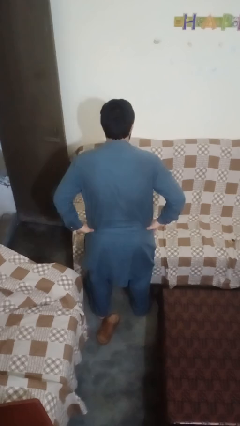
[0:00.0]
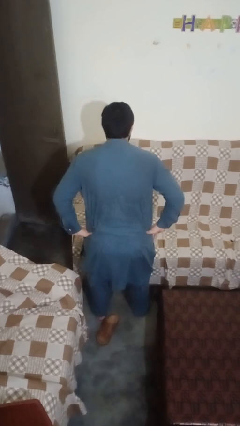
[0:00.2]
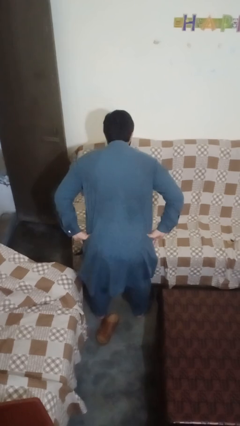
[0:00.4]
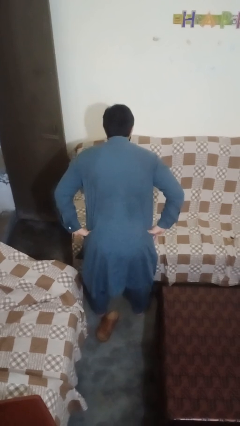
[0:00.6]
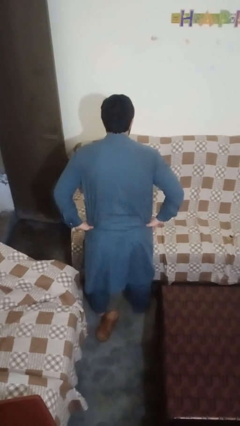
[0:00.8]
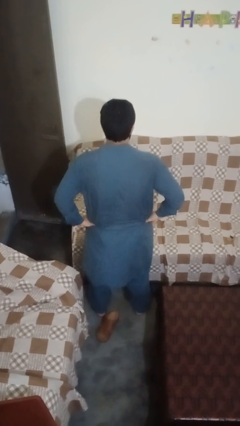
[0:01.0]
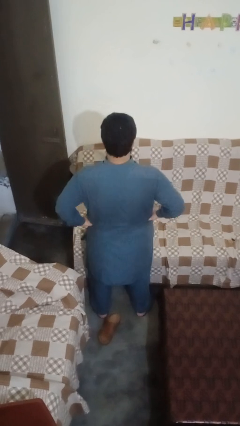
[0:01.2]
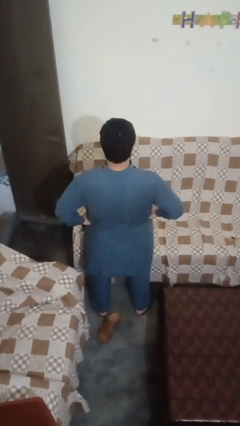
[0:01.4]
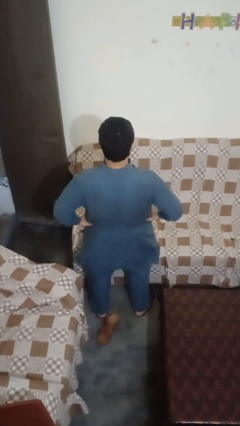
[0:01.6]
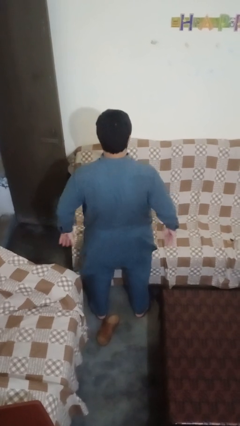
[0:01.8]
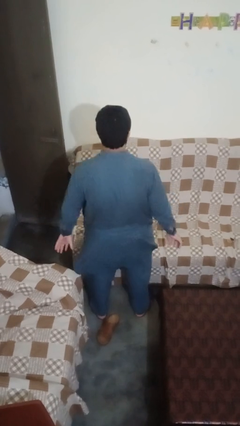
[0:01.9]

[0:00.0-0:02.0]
person wiggles hips

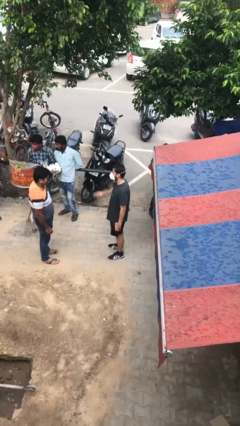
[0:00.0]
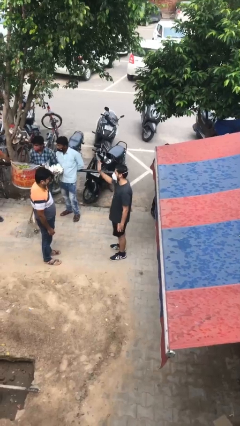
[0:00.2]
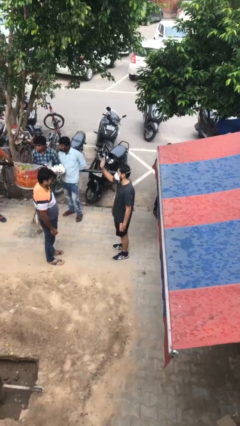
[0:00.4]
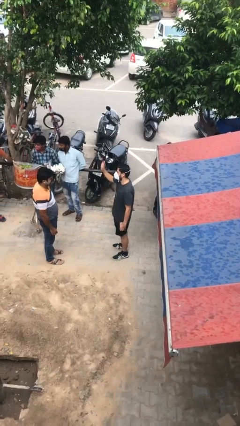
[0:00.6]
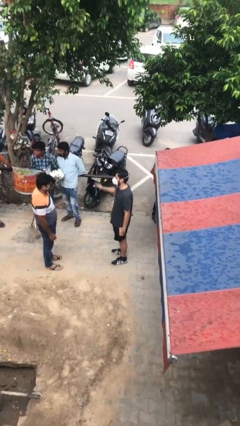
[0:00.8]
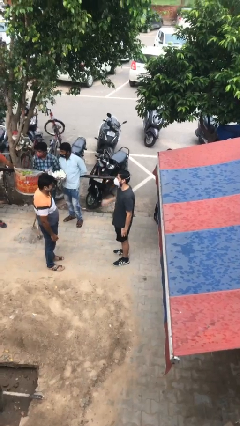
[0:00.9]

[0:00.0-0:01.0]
person waves at person

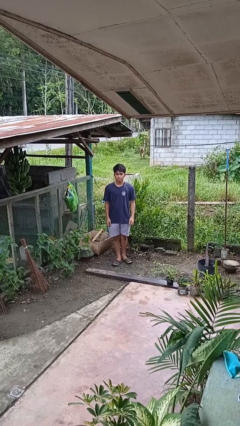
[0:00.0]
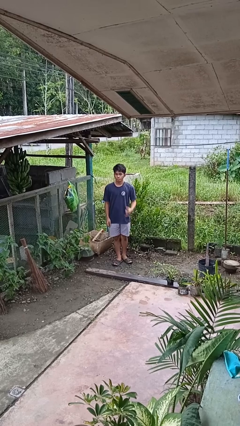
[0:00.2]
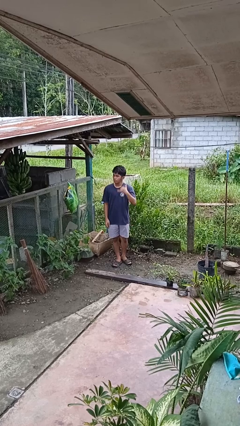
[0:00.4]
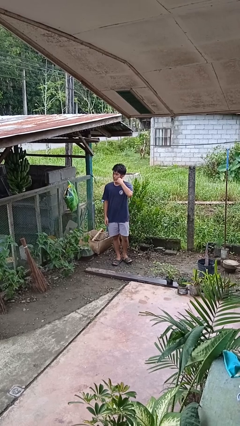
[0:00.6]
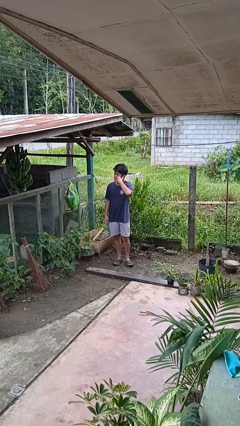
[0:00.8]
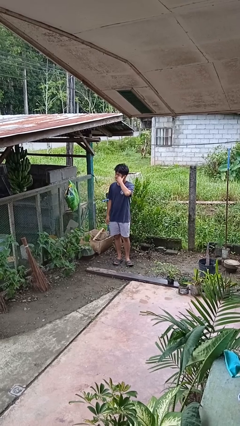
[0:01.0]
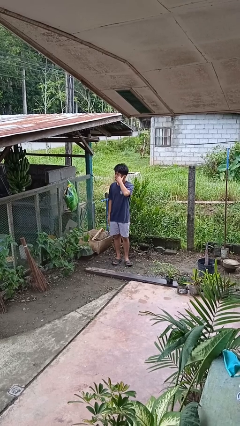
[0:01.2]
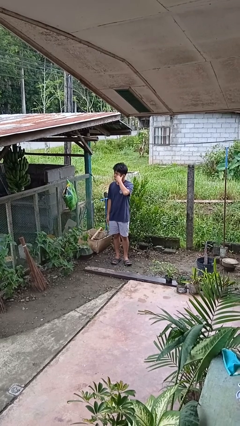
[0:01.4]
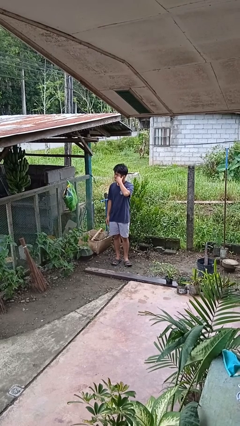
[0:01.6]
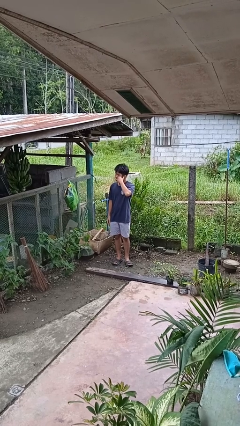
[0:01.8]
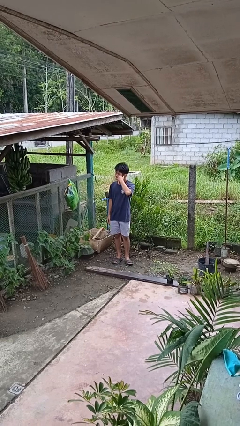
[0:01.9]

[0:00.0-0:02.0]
person gestures call me

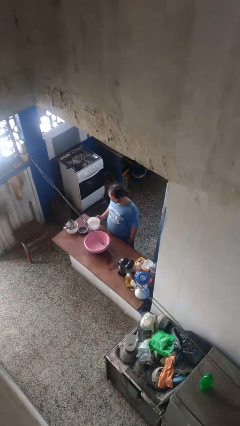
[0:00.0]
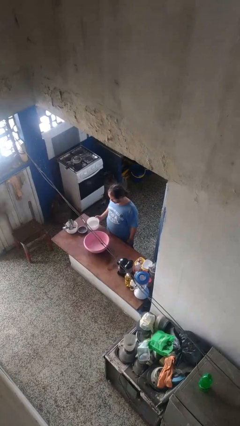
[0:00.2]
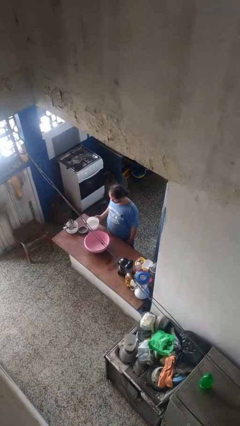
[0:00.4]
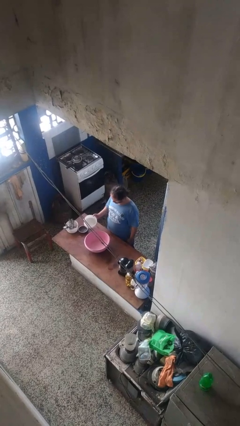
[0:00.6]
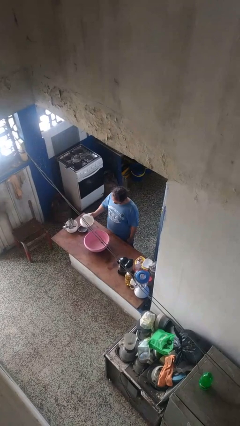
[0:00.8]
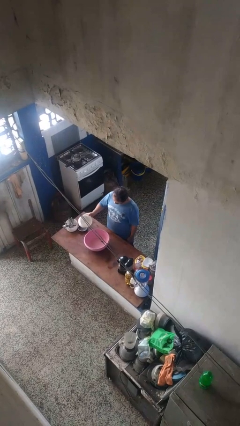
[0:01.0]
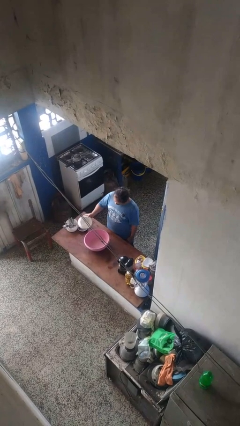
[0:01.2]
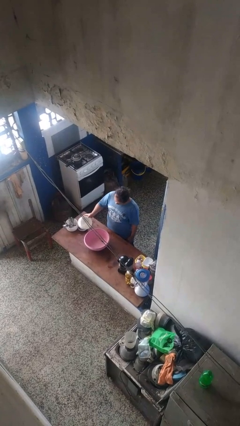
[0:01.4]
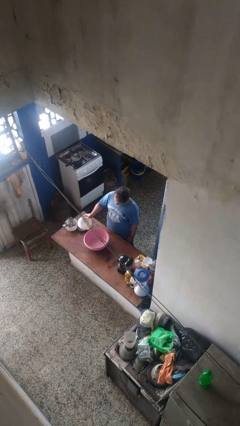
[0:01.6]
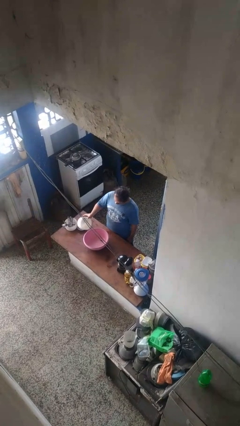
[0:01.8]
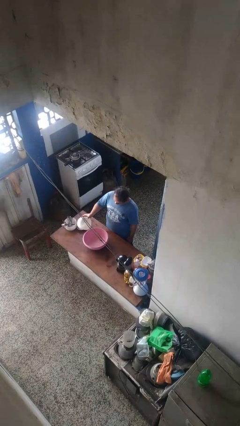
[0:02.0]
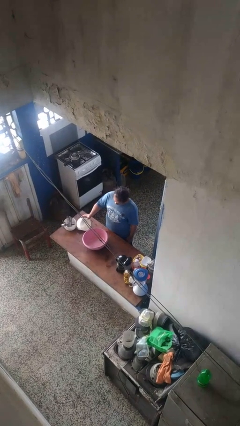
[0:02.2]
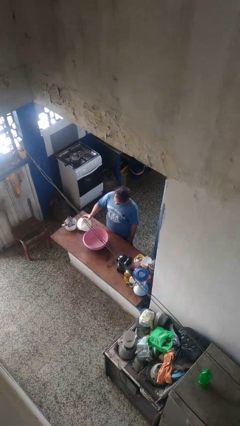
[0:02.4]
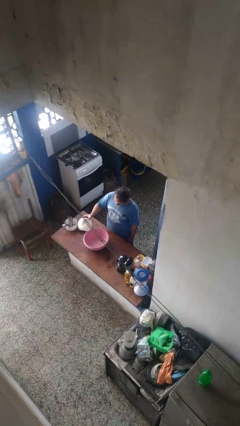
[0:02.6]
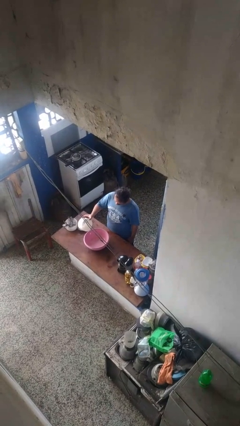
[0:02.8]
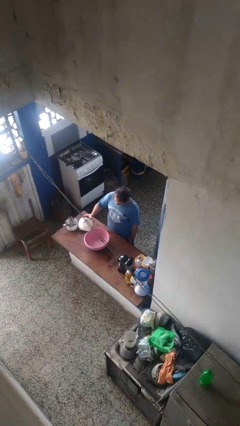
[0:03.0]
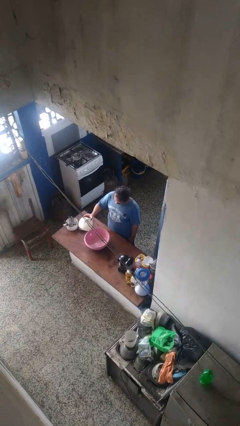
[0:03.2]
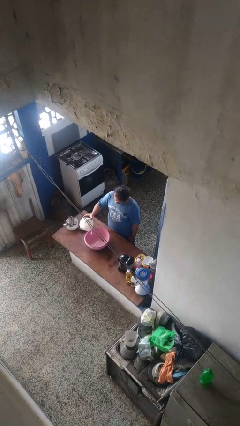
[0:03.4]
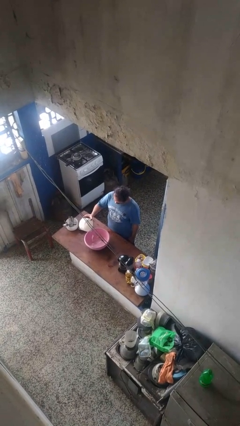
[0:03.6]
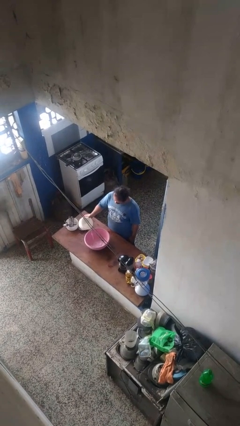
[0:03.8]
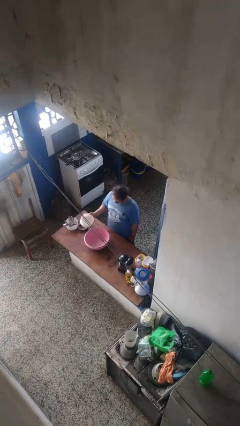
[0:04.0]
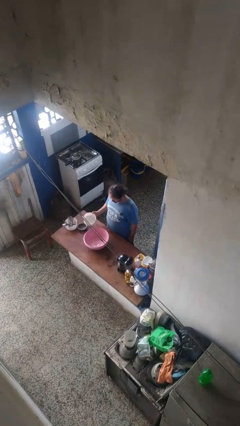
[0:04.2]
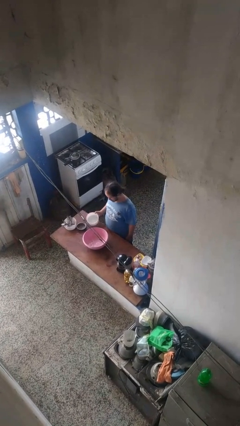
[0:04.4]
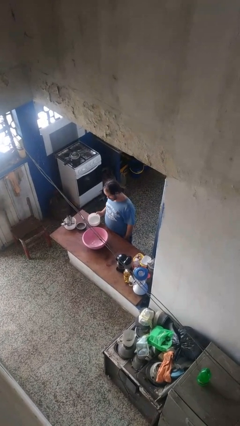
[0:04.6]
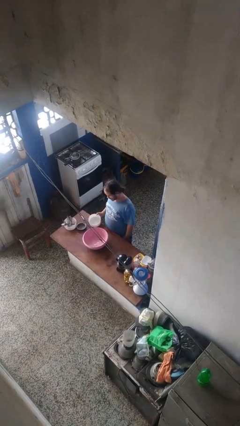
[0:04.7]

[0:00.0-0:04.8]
person pours into bowl

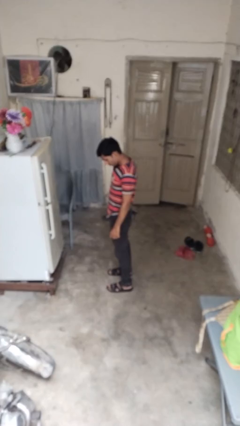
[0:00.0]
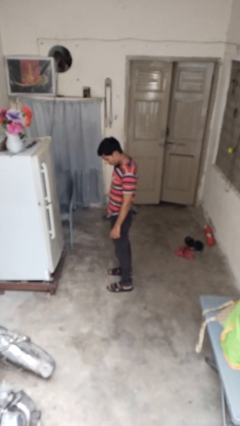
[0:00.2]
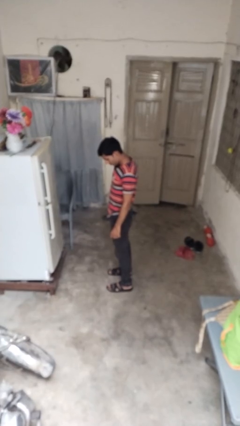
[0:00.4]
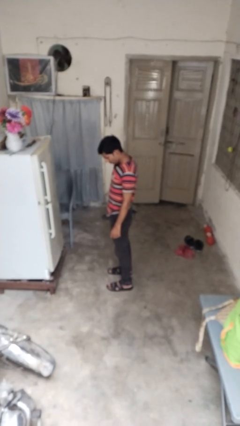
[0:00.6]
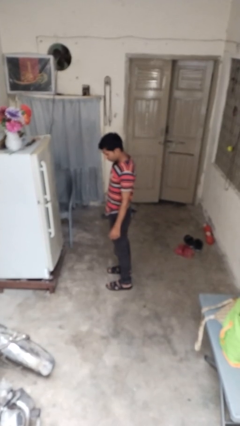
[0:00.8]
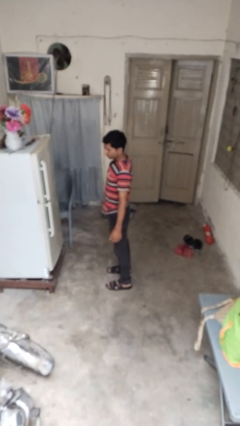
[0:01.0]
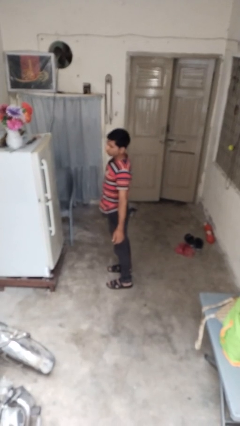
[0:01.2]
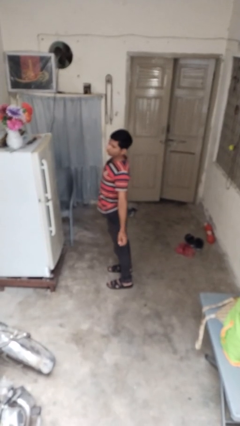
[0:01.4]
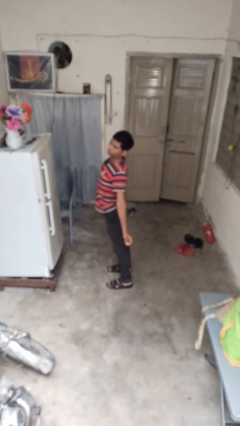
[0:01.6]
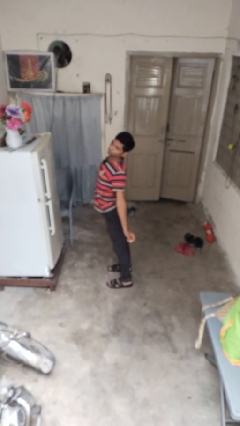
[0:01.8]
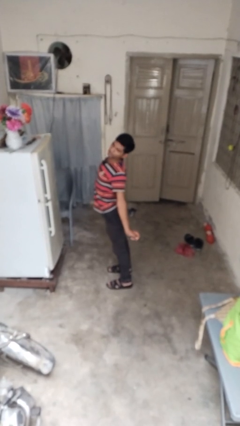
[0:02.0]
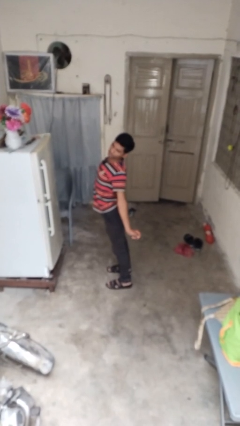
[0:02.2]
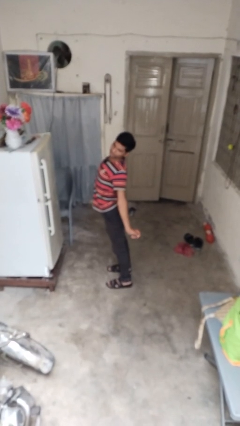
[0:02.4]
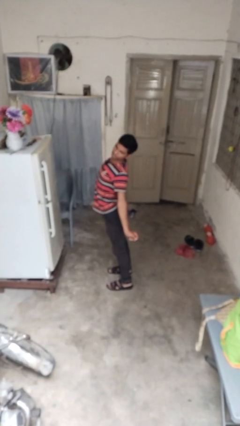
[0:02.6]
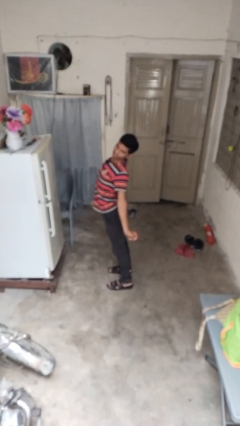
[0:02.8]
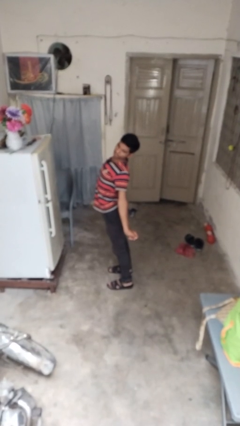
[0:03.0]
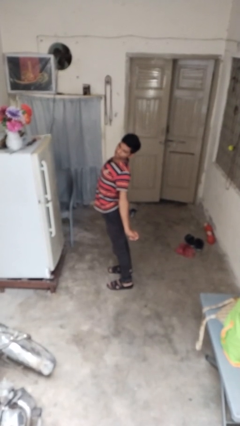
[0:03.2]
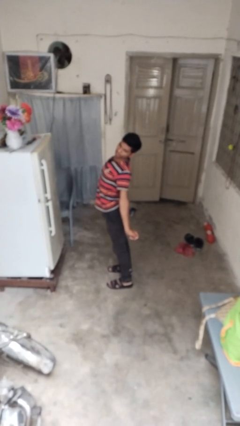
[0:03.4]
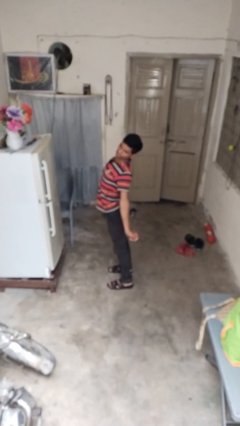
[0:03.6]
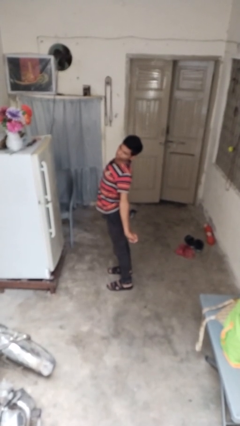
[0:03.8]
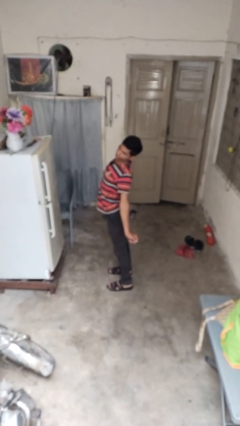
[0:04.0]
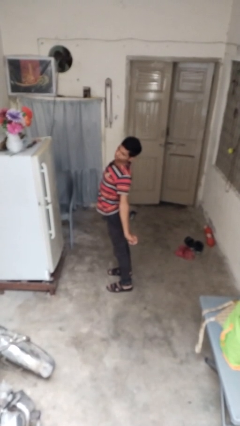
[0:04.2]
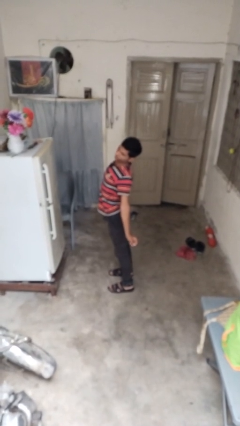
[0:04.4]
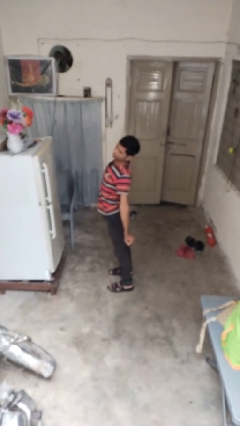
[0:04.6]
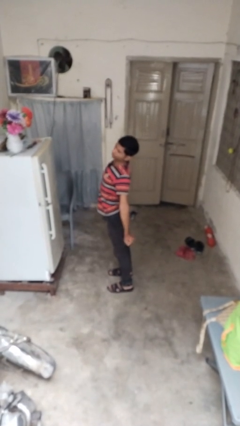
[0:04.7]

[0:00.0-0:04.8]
person stretches back

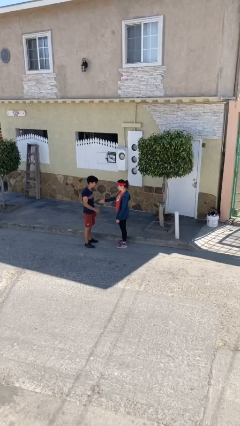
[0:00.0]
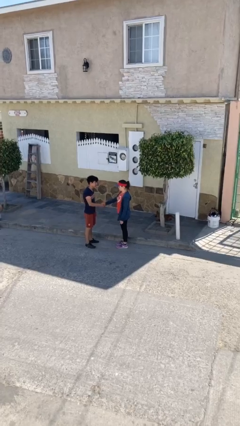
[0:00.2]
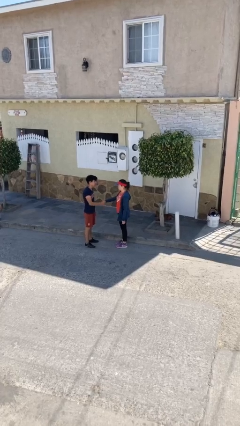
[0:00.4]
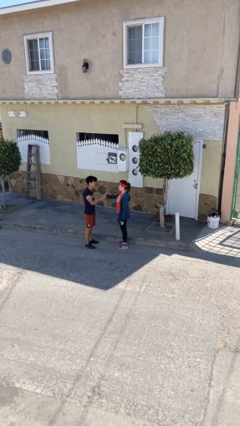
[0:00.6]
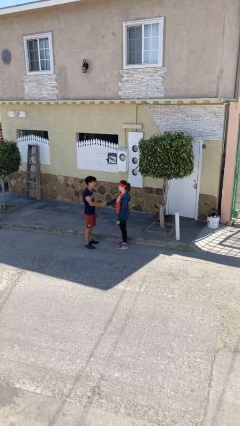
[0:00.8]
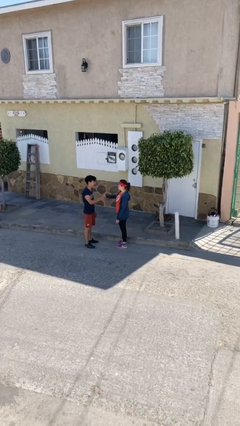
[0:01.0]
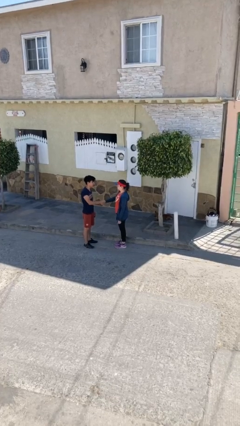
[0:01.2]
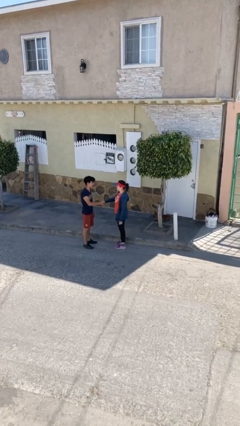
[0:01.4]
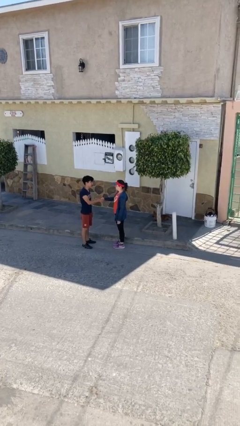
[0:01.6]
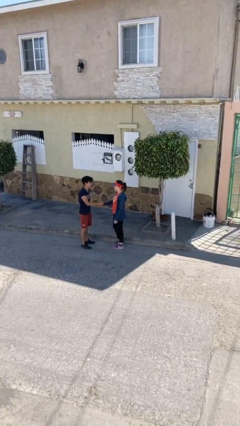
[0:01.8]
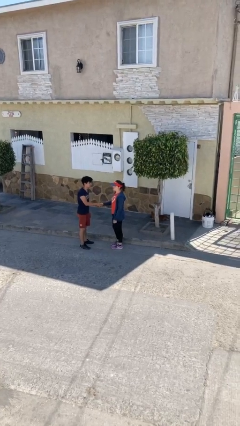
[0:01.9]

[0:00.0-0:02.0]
person shakes hand

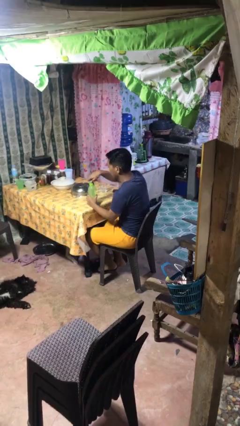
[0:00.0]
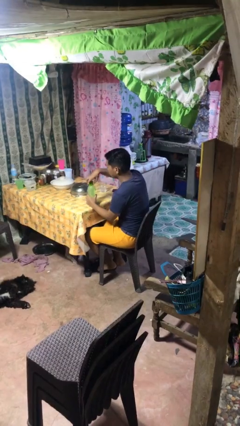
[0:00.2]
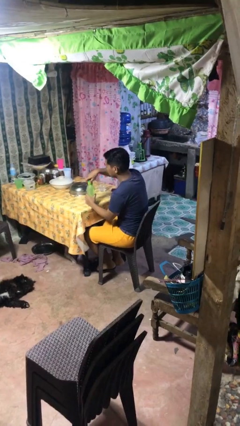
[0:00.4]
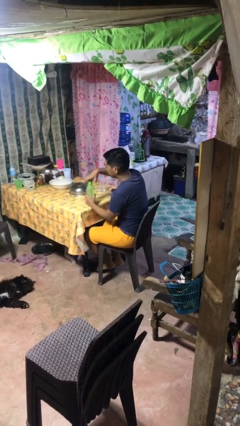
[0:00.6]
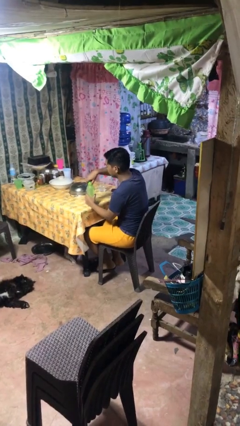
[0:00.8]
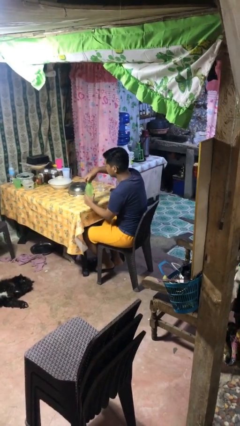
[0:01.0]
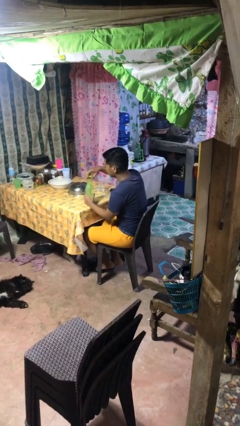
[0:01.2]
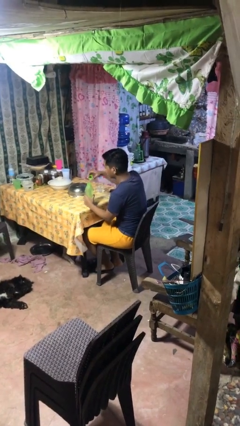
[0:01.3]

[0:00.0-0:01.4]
person unscrews lid from bottle
